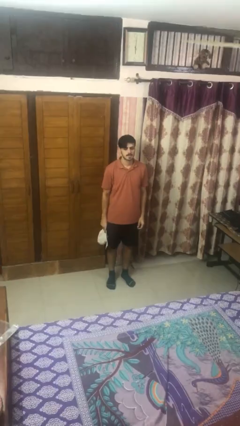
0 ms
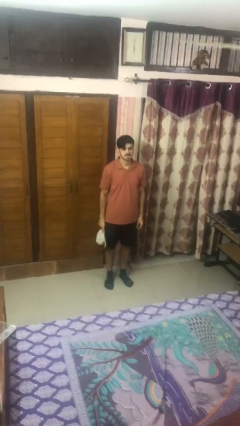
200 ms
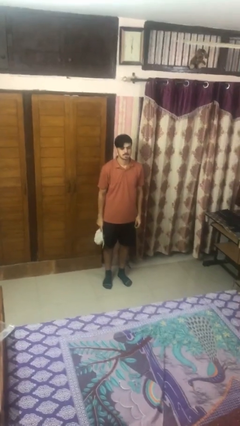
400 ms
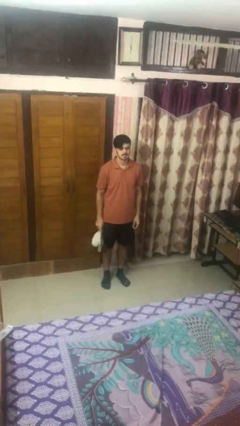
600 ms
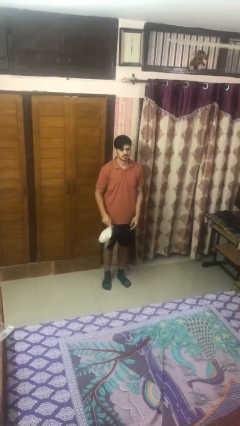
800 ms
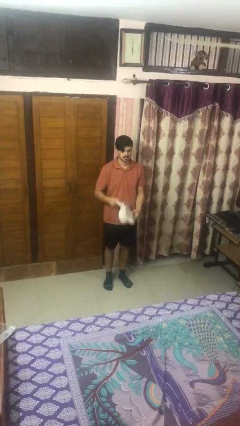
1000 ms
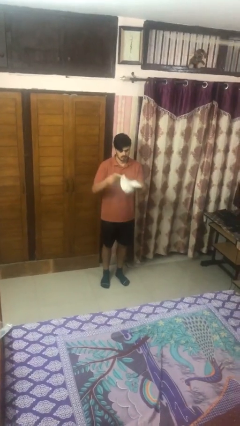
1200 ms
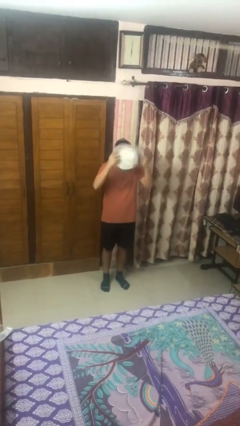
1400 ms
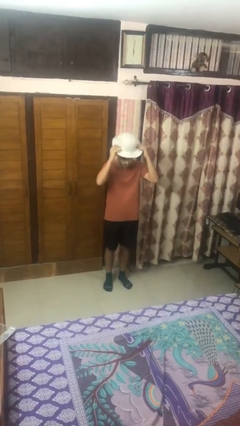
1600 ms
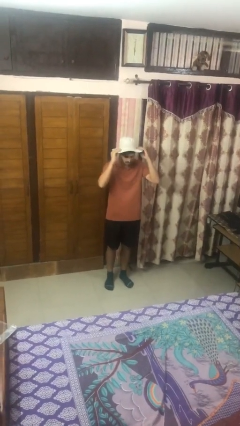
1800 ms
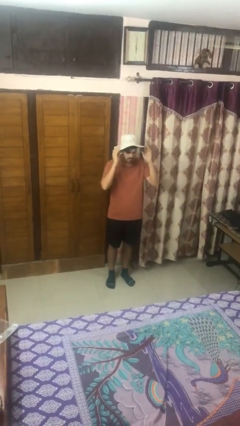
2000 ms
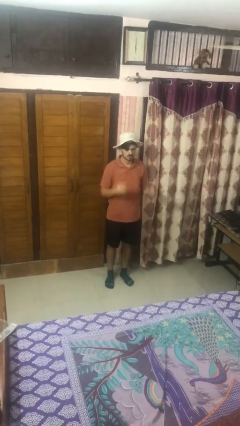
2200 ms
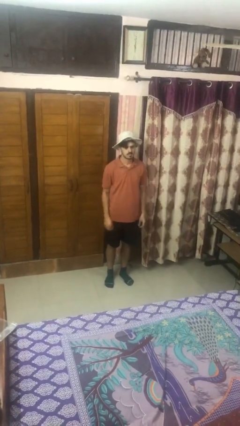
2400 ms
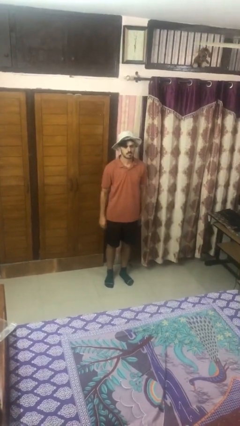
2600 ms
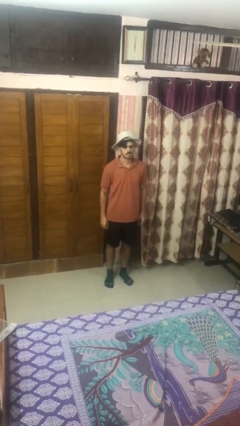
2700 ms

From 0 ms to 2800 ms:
person puts on hat

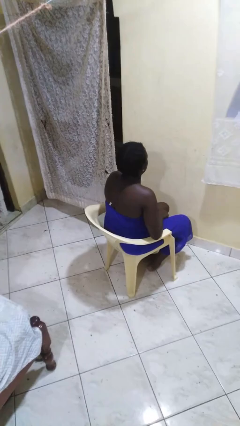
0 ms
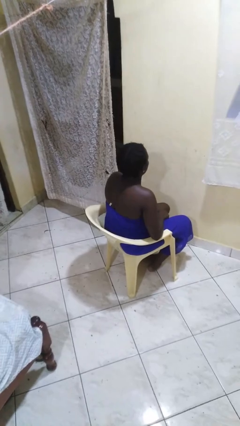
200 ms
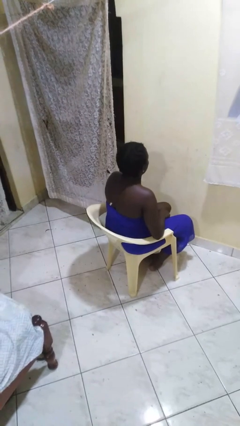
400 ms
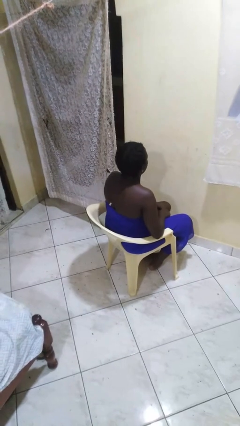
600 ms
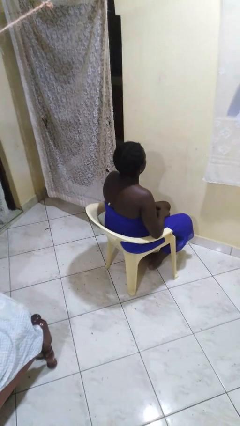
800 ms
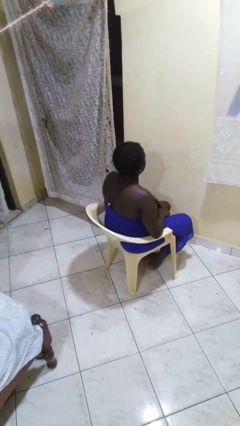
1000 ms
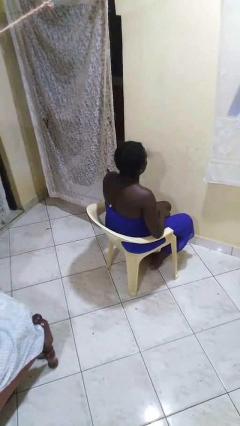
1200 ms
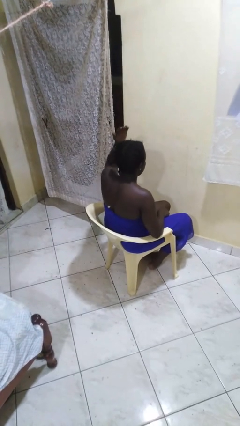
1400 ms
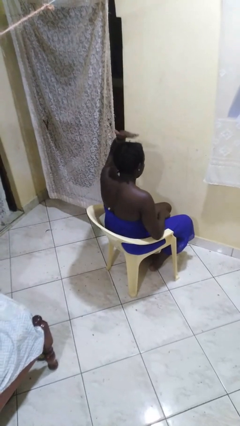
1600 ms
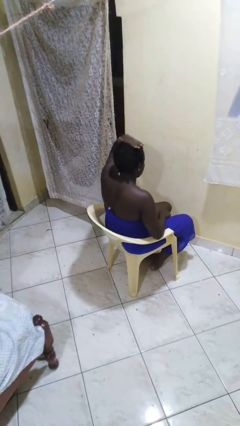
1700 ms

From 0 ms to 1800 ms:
person pats head

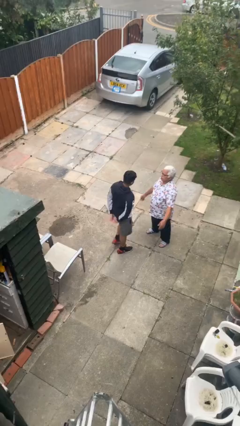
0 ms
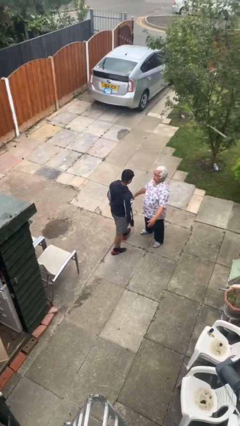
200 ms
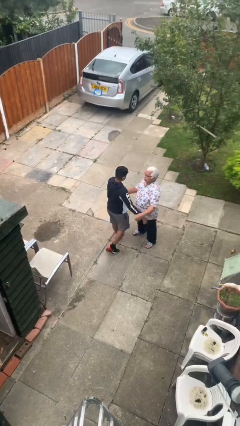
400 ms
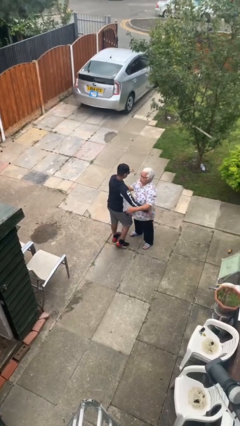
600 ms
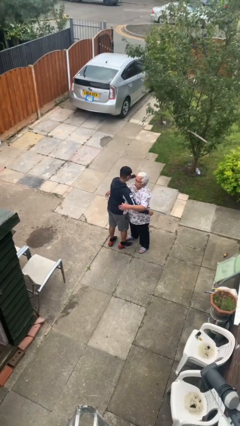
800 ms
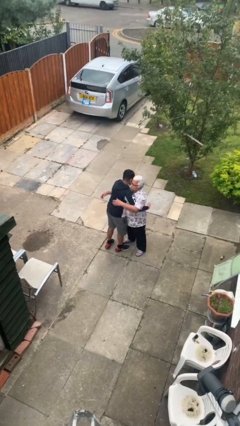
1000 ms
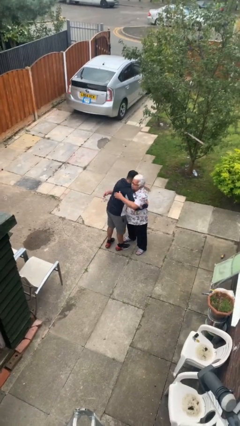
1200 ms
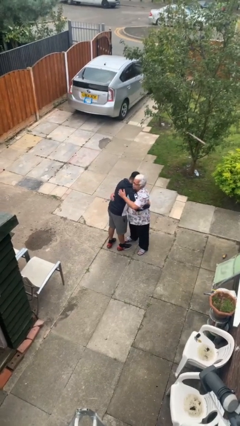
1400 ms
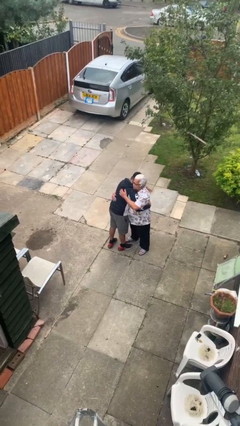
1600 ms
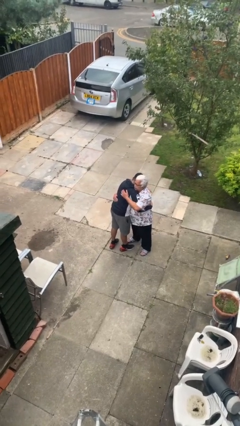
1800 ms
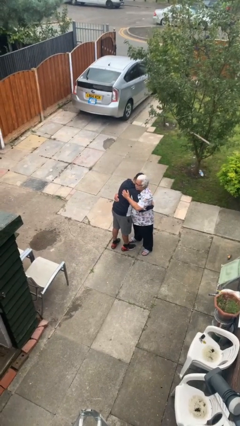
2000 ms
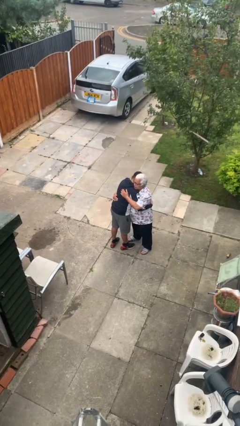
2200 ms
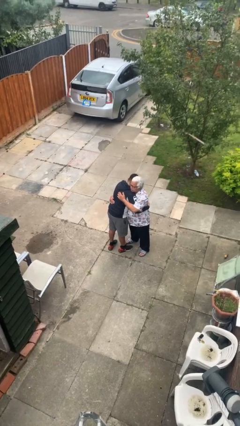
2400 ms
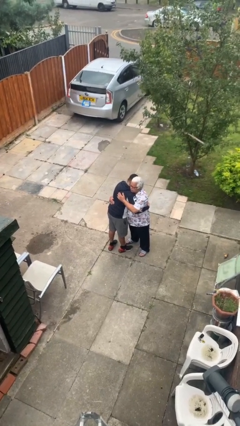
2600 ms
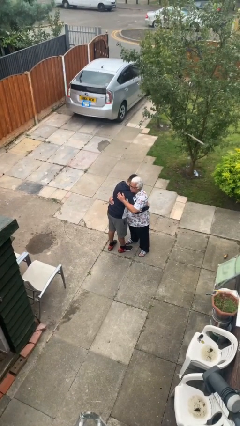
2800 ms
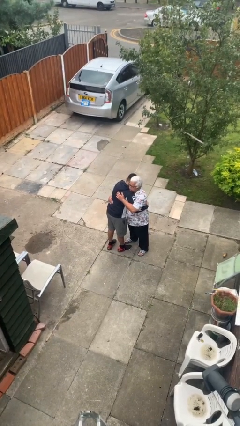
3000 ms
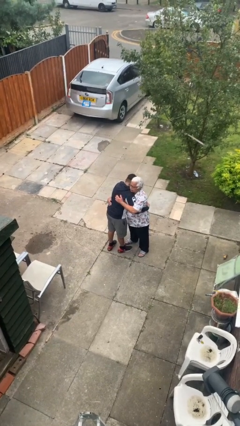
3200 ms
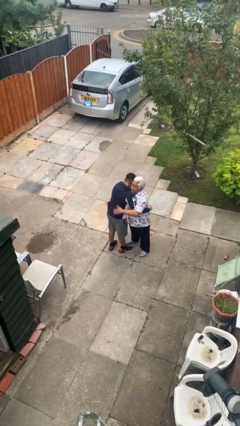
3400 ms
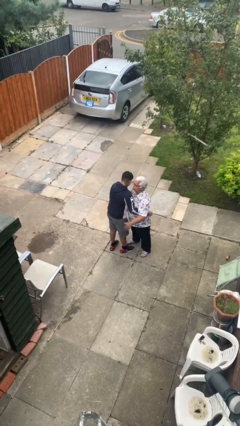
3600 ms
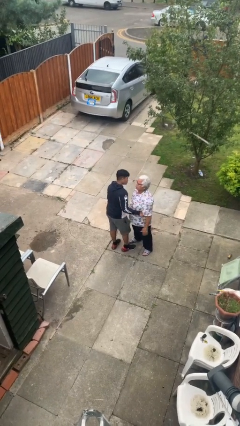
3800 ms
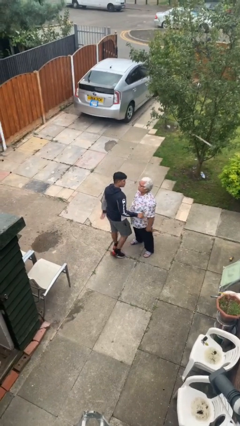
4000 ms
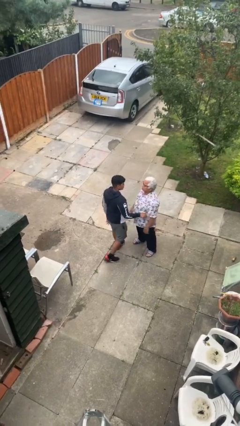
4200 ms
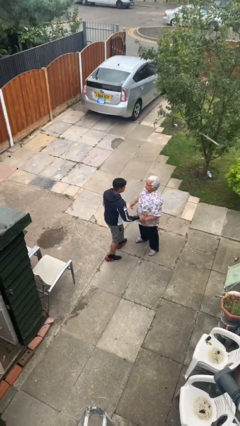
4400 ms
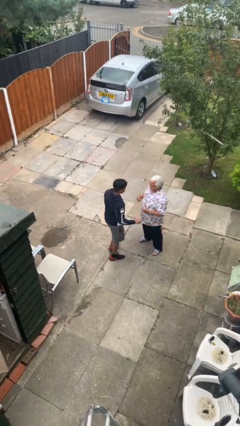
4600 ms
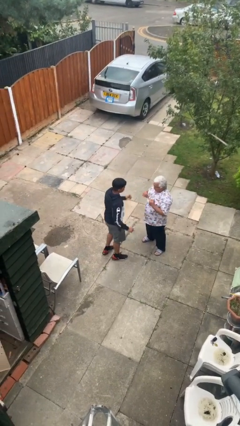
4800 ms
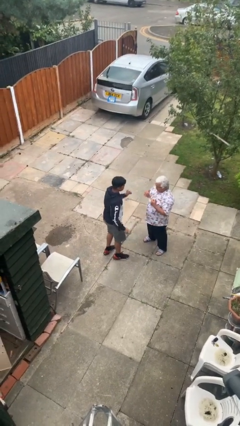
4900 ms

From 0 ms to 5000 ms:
person embraces person

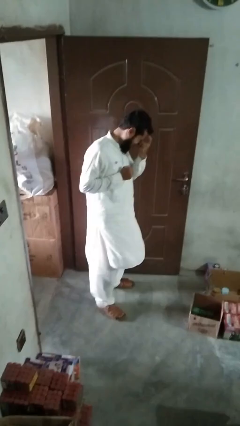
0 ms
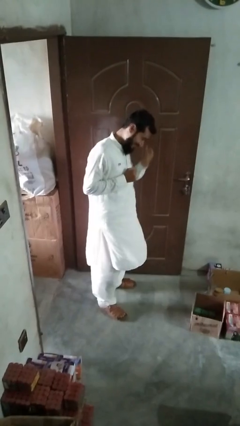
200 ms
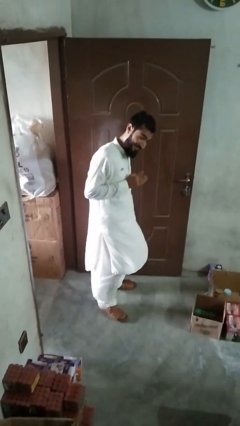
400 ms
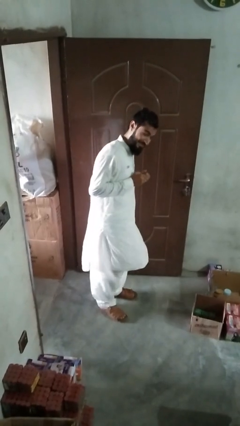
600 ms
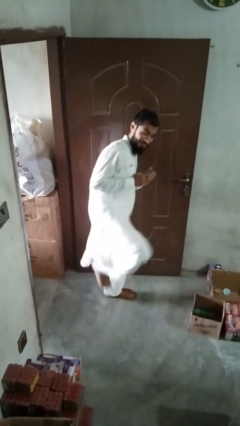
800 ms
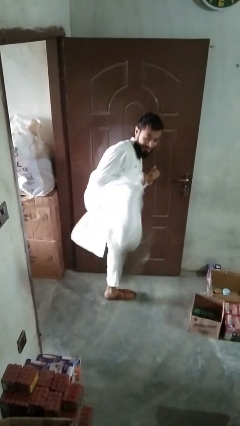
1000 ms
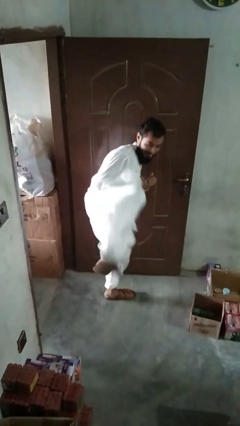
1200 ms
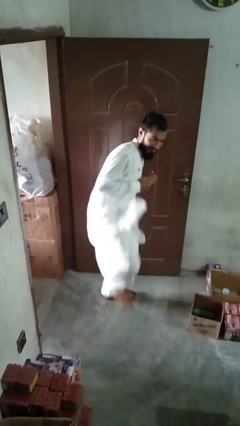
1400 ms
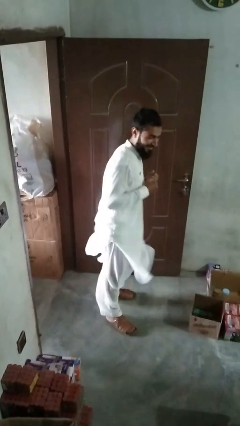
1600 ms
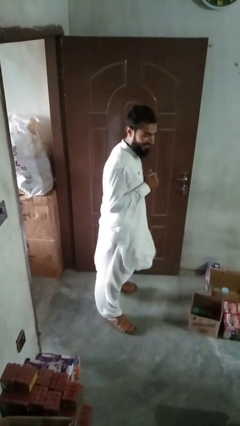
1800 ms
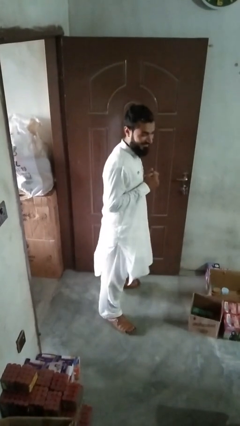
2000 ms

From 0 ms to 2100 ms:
person karate kicks

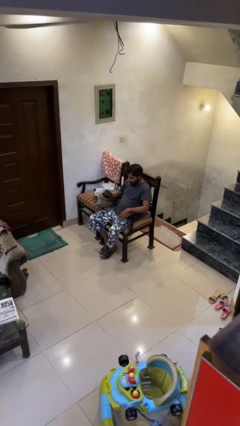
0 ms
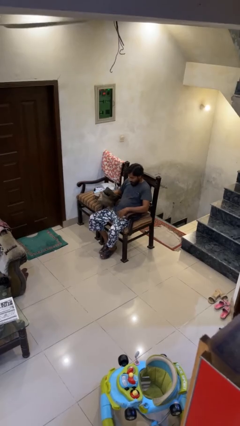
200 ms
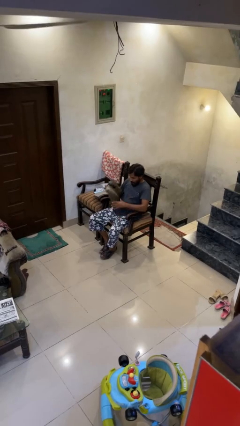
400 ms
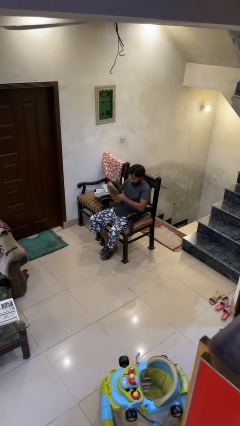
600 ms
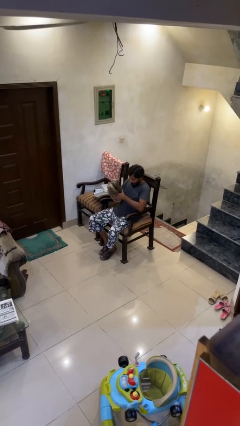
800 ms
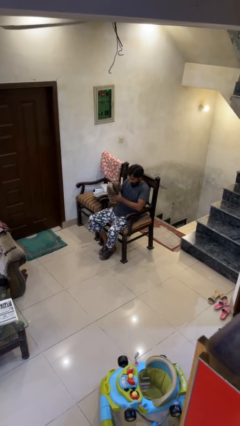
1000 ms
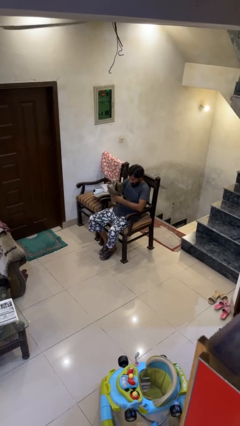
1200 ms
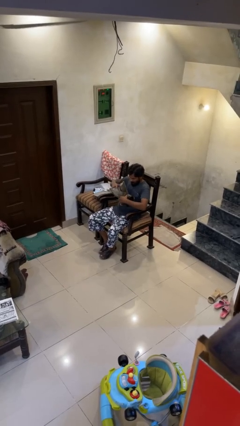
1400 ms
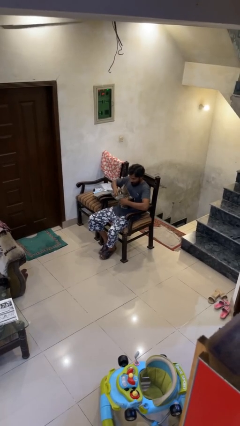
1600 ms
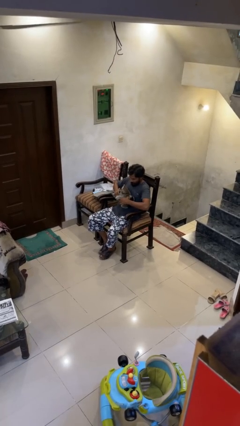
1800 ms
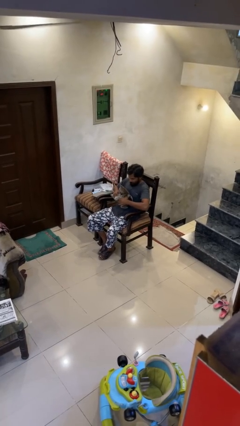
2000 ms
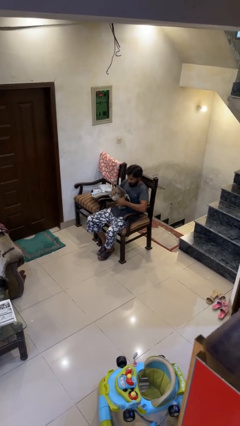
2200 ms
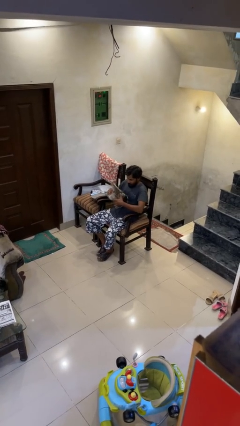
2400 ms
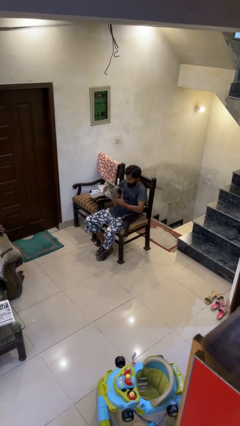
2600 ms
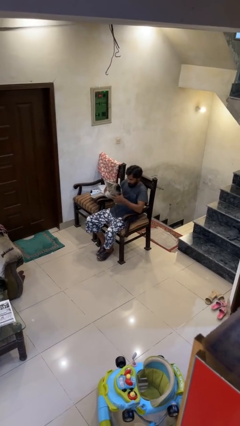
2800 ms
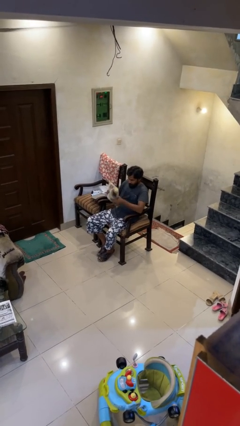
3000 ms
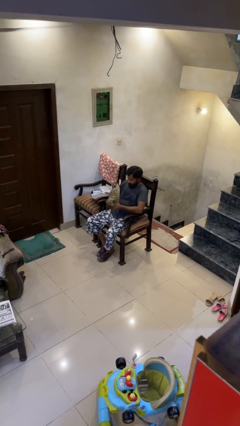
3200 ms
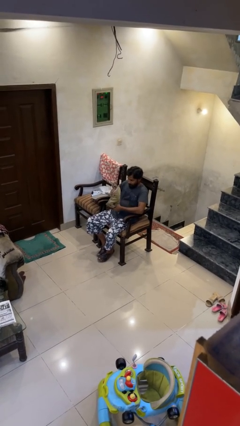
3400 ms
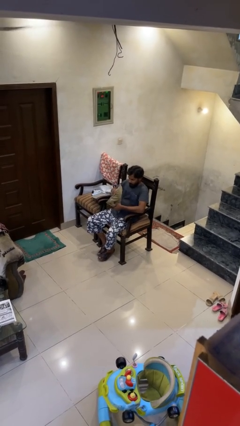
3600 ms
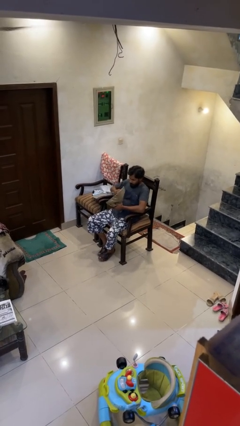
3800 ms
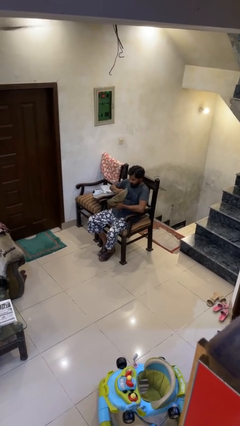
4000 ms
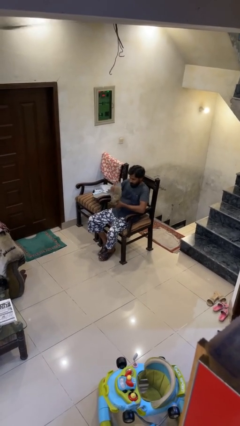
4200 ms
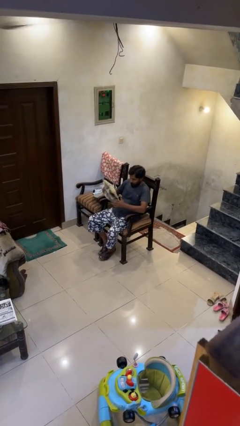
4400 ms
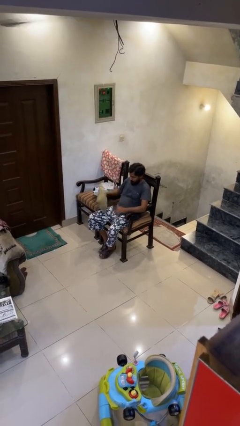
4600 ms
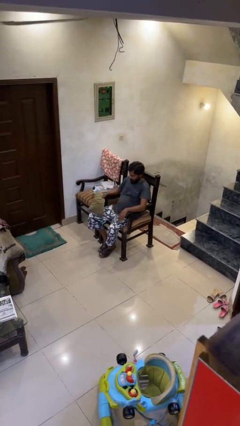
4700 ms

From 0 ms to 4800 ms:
person squeezes object

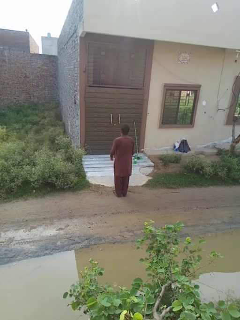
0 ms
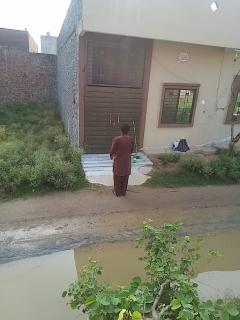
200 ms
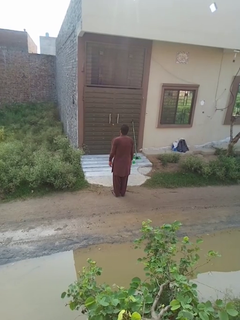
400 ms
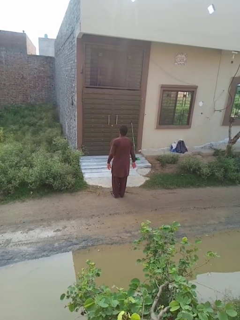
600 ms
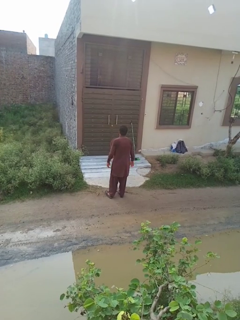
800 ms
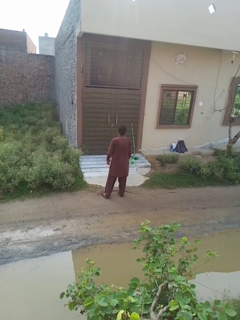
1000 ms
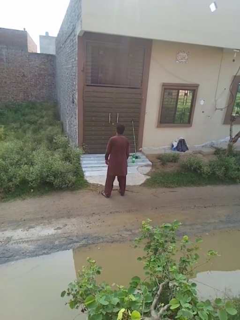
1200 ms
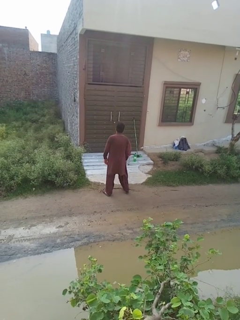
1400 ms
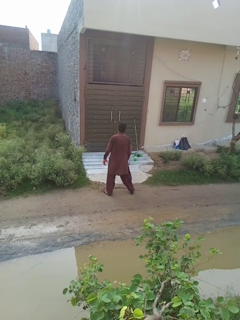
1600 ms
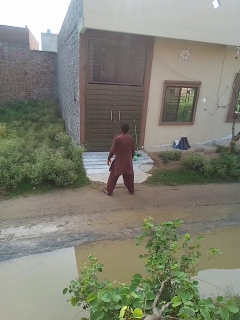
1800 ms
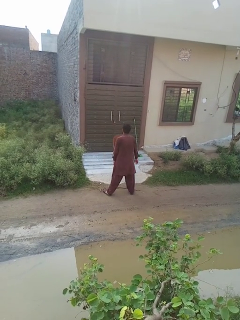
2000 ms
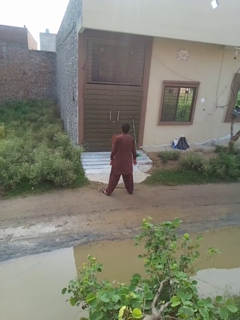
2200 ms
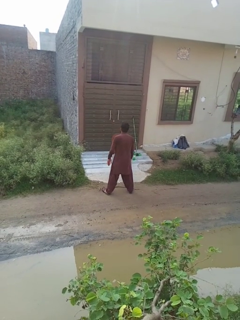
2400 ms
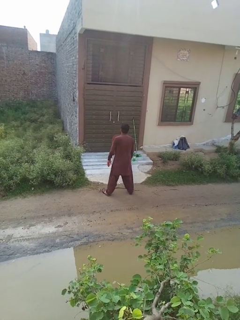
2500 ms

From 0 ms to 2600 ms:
person stretches back
